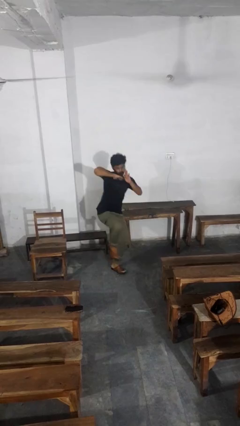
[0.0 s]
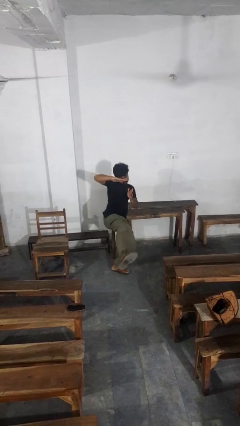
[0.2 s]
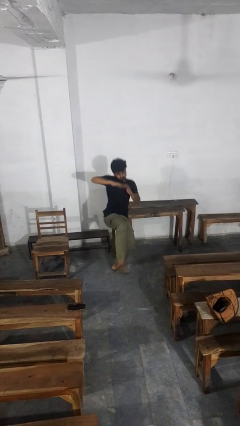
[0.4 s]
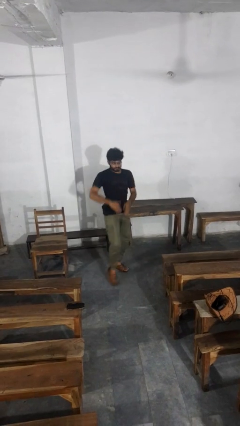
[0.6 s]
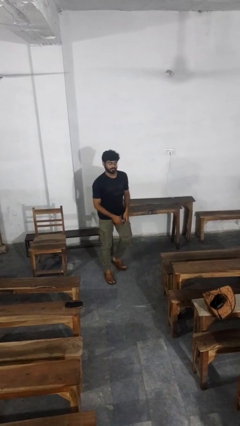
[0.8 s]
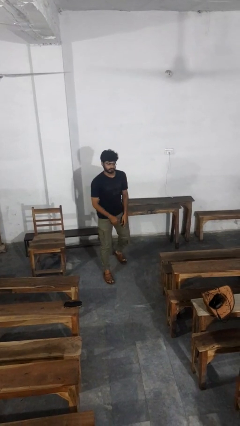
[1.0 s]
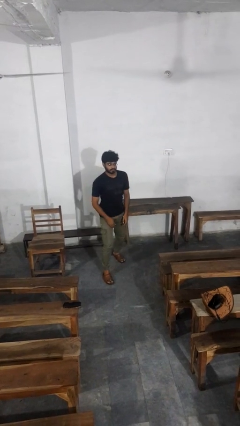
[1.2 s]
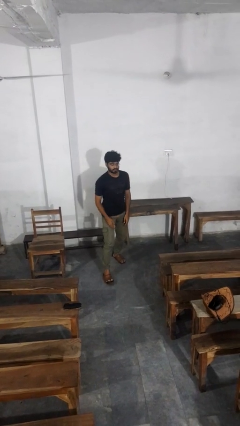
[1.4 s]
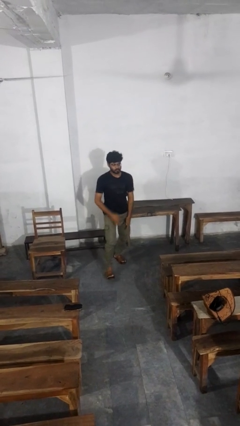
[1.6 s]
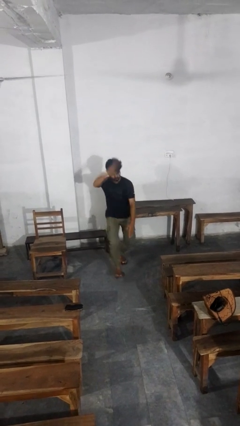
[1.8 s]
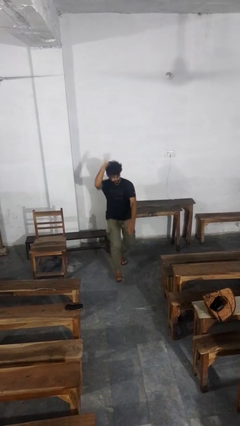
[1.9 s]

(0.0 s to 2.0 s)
person karate kicks

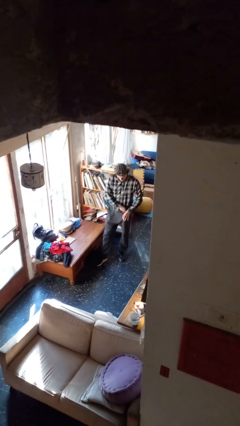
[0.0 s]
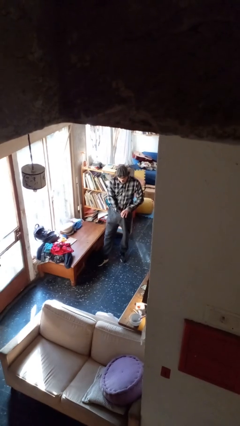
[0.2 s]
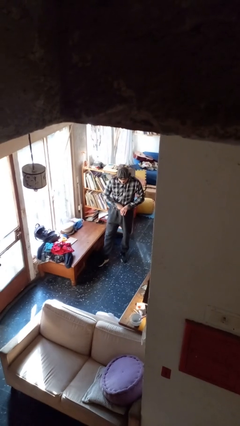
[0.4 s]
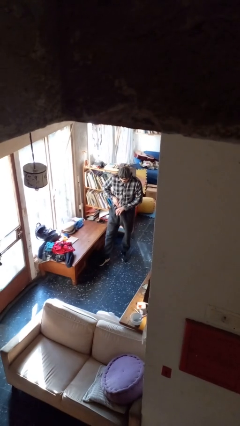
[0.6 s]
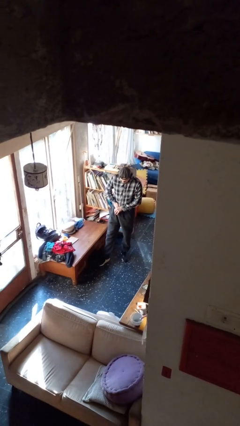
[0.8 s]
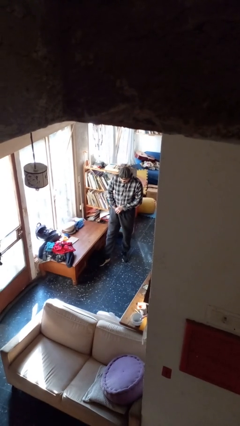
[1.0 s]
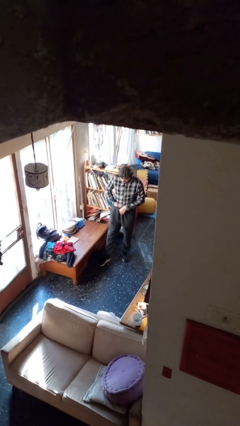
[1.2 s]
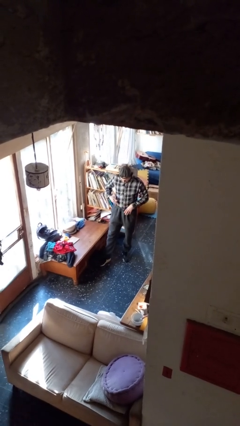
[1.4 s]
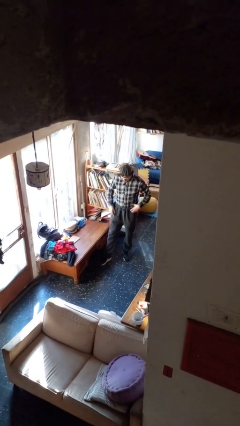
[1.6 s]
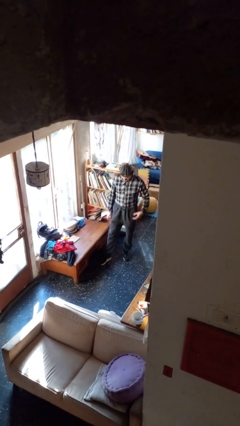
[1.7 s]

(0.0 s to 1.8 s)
person tucks in shirt

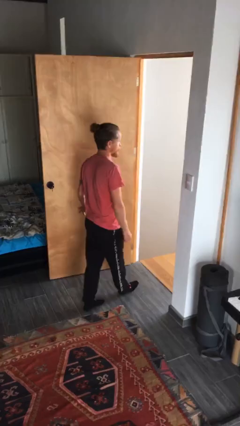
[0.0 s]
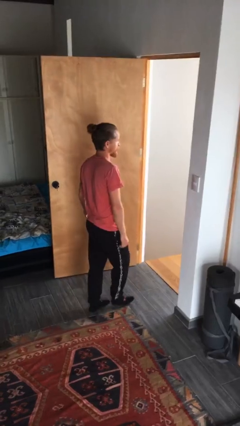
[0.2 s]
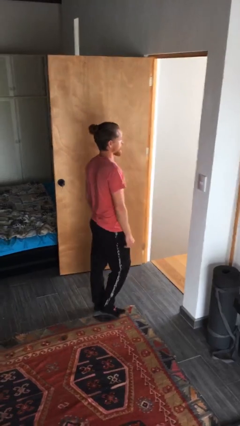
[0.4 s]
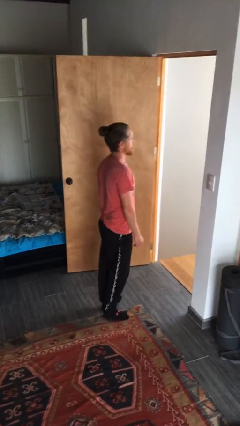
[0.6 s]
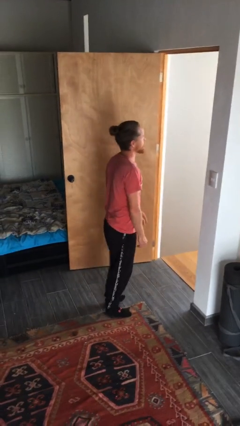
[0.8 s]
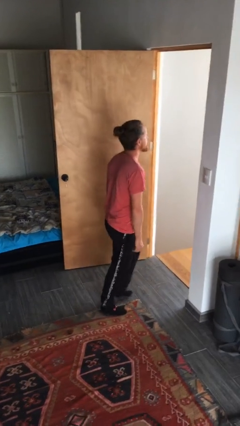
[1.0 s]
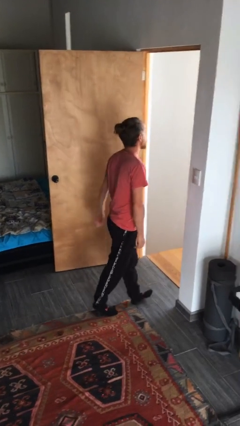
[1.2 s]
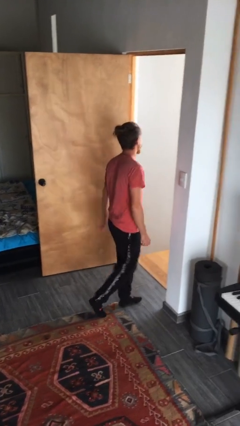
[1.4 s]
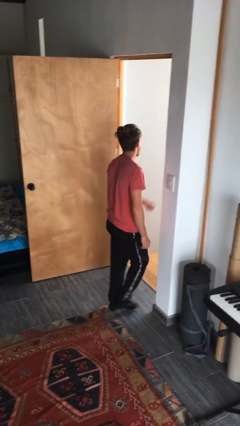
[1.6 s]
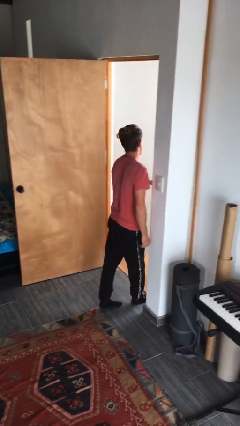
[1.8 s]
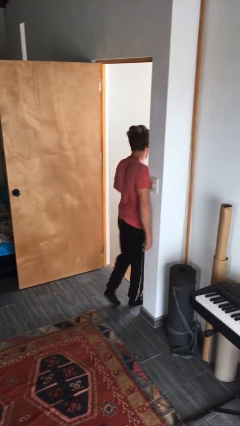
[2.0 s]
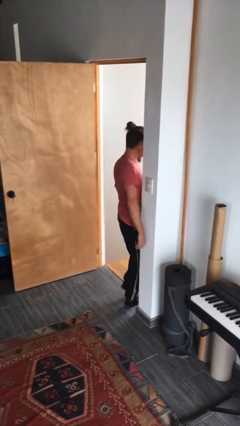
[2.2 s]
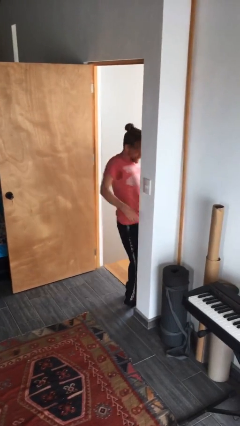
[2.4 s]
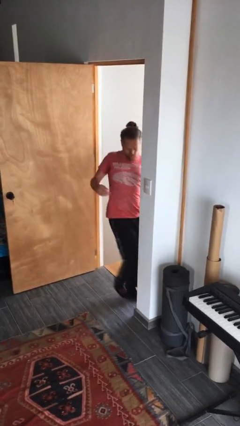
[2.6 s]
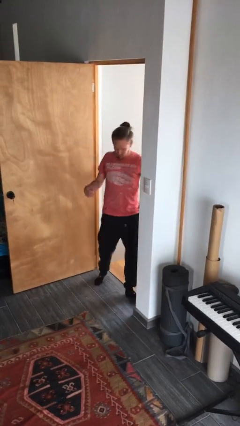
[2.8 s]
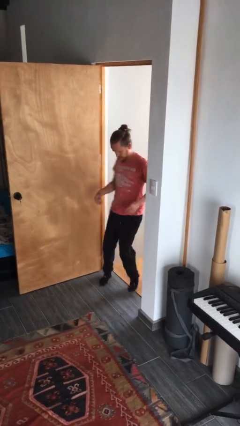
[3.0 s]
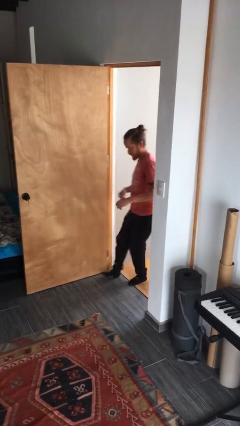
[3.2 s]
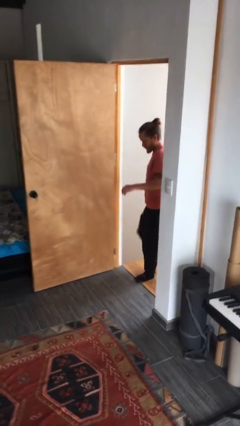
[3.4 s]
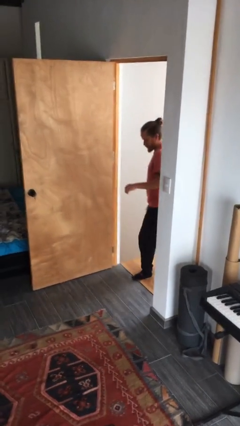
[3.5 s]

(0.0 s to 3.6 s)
person bumps into wall

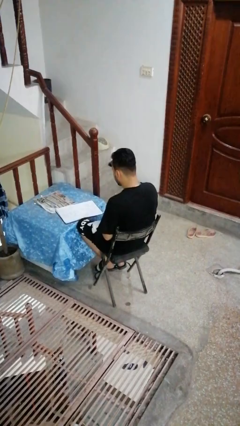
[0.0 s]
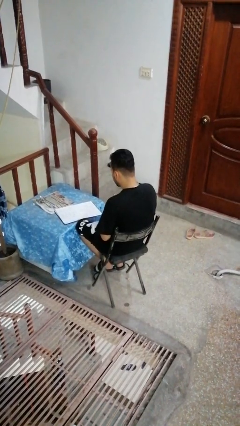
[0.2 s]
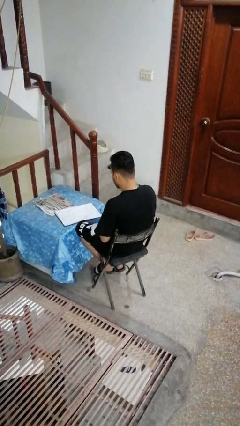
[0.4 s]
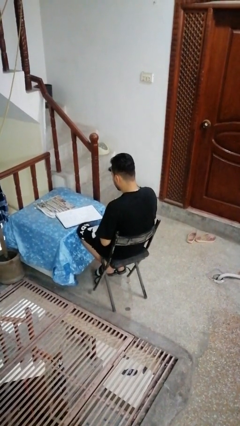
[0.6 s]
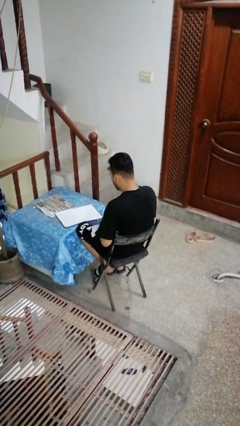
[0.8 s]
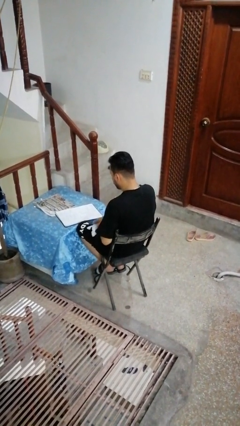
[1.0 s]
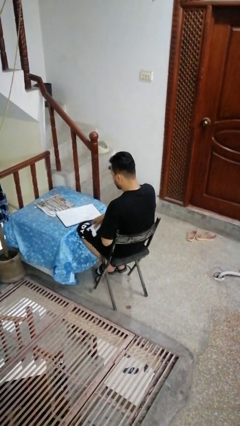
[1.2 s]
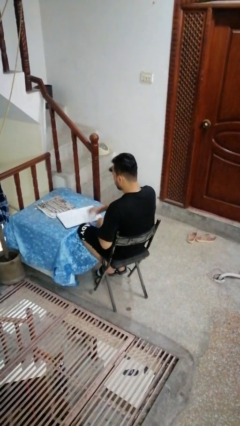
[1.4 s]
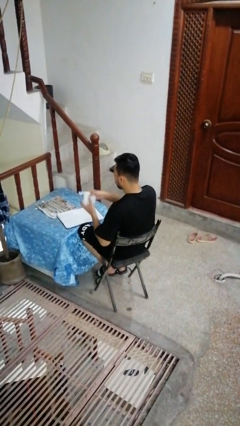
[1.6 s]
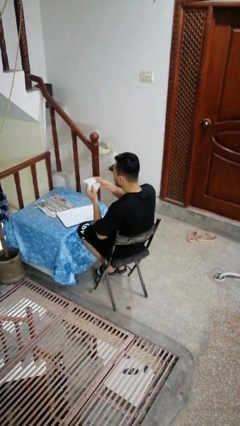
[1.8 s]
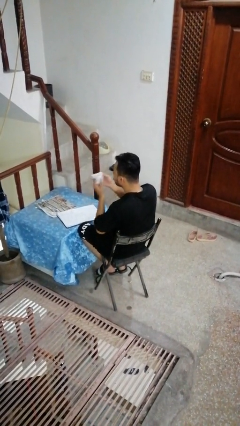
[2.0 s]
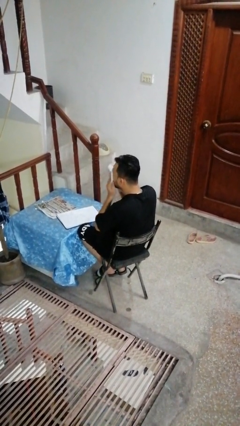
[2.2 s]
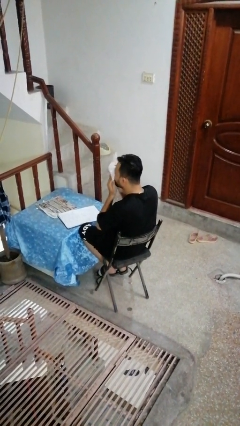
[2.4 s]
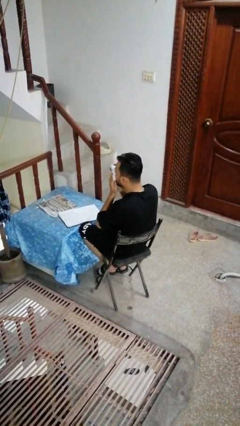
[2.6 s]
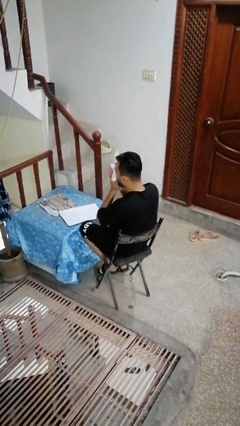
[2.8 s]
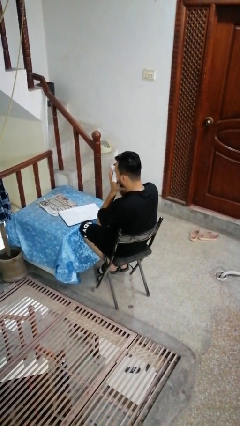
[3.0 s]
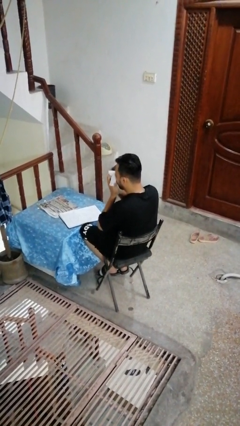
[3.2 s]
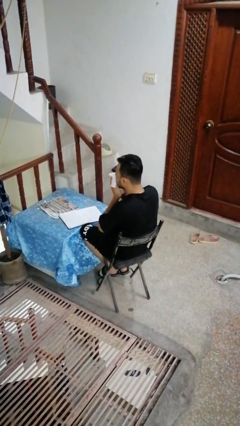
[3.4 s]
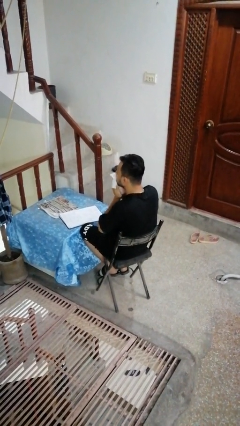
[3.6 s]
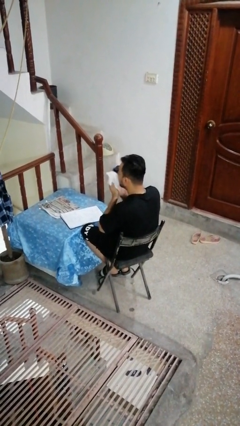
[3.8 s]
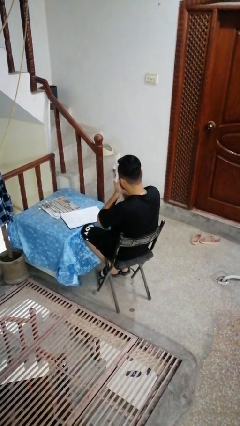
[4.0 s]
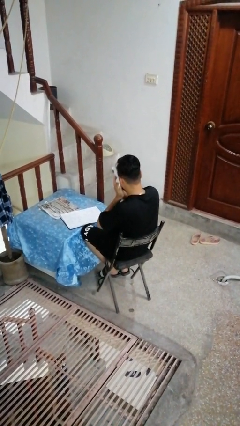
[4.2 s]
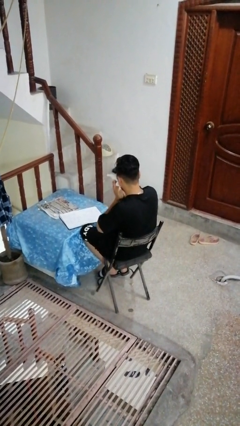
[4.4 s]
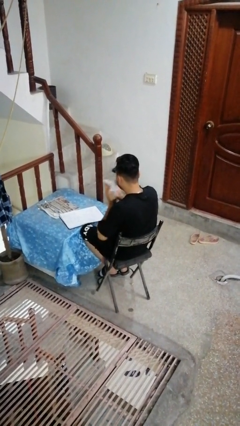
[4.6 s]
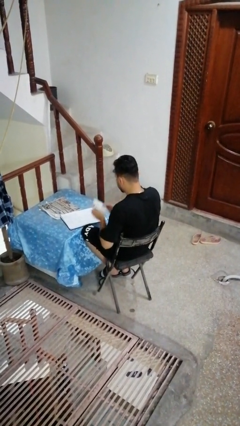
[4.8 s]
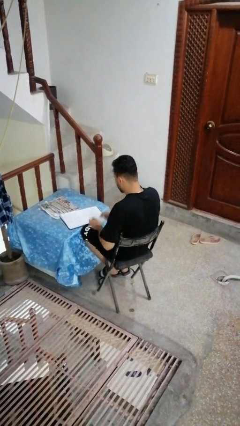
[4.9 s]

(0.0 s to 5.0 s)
person wipes mouth with napkin

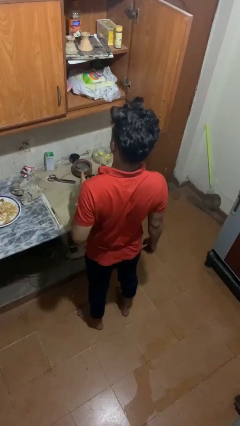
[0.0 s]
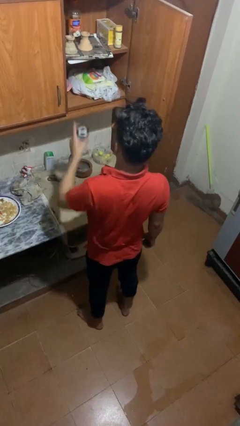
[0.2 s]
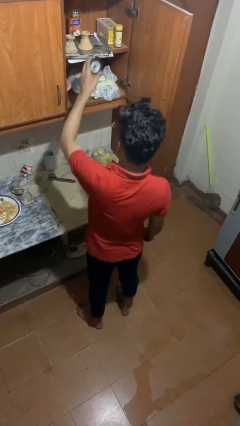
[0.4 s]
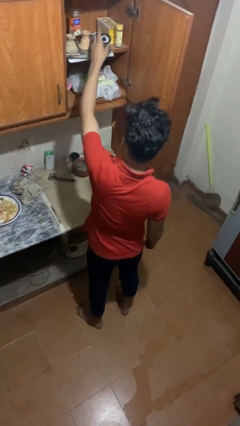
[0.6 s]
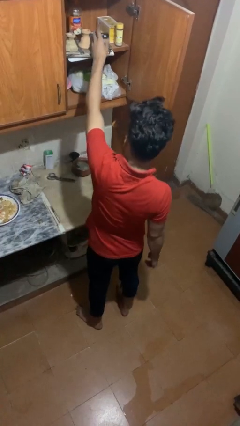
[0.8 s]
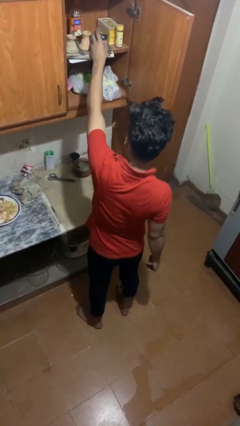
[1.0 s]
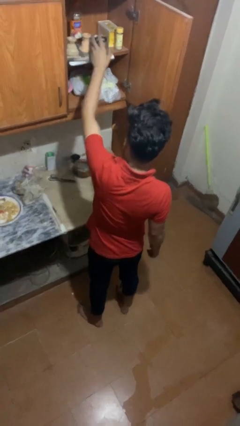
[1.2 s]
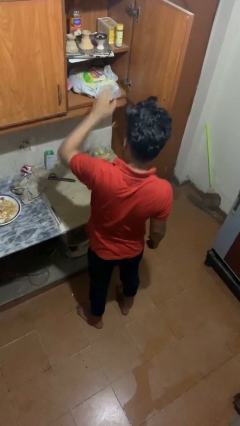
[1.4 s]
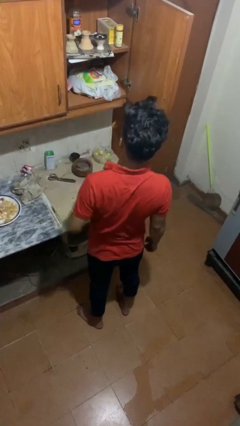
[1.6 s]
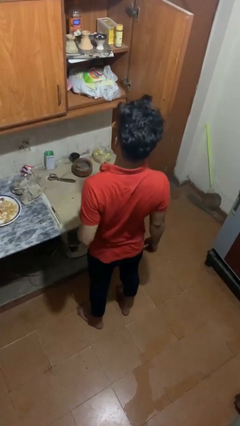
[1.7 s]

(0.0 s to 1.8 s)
person puts object in cabinet

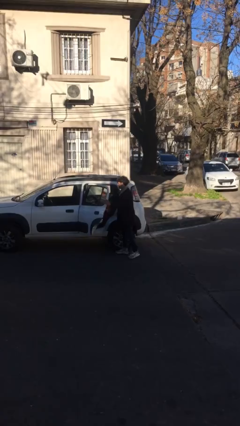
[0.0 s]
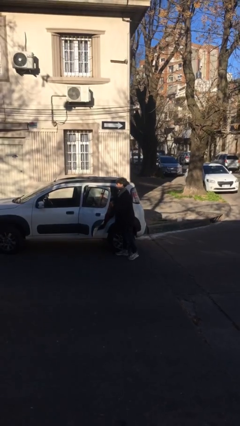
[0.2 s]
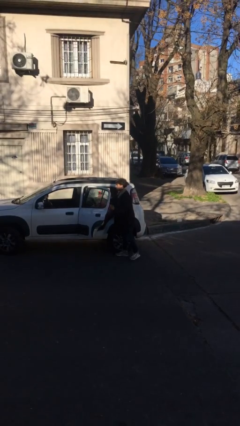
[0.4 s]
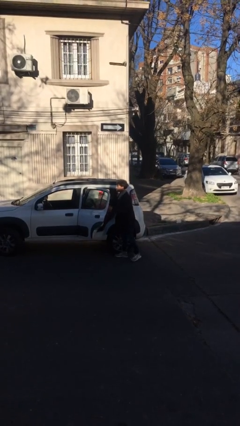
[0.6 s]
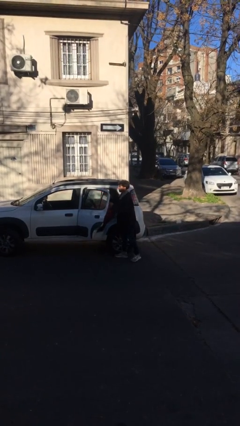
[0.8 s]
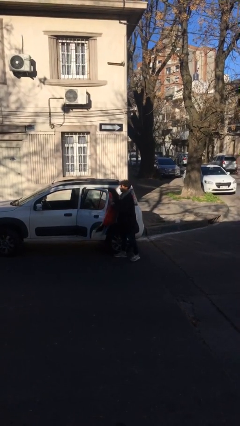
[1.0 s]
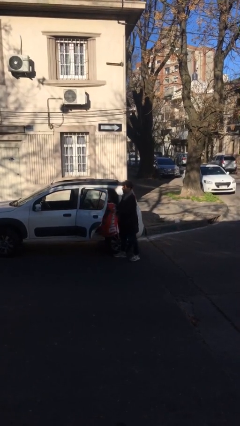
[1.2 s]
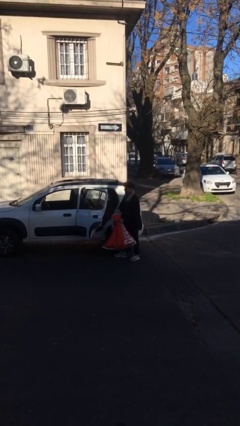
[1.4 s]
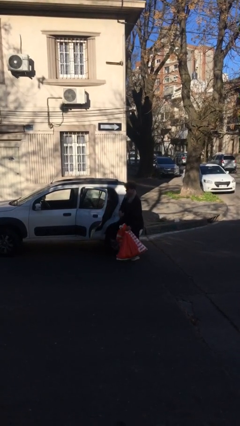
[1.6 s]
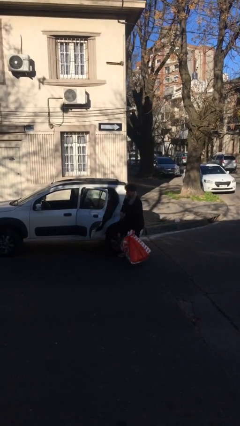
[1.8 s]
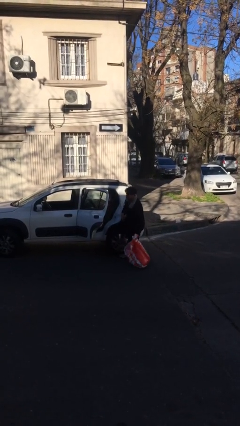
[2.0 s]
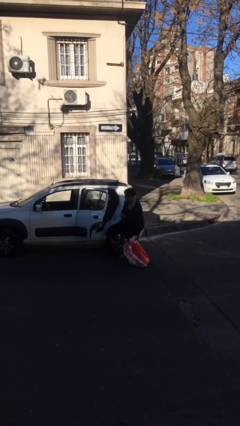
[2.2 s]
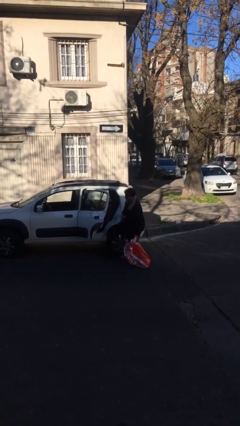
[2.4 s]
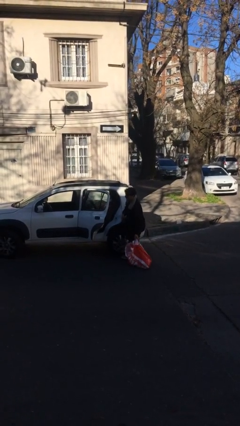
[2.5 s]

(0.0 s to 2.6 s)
person unloads car

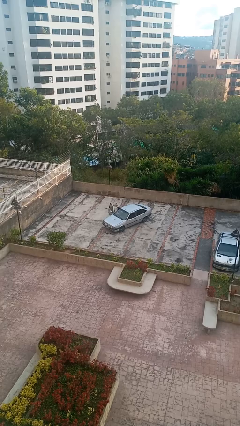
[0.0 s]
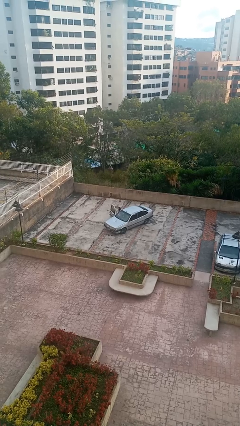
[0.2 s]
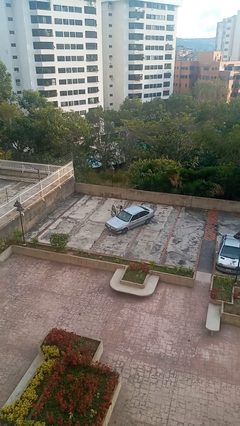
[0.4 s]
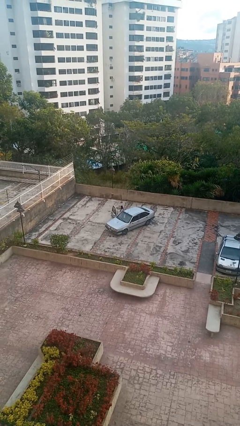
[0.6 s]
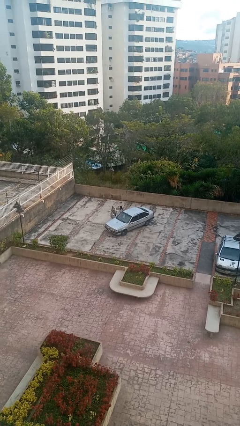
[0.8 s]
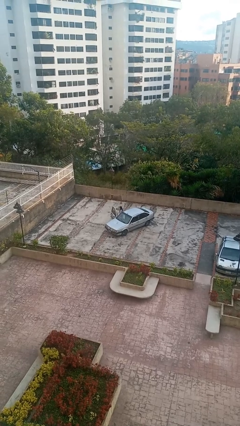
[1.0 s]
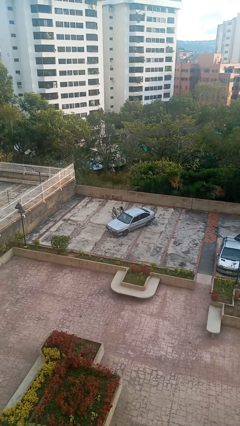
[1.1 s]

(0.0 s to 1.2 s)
person exits car
